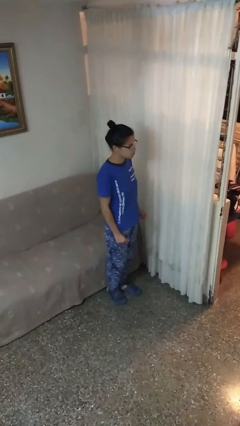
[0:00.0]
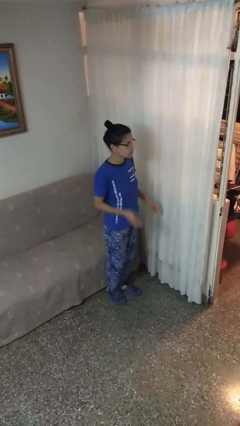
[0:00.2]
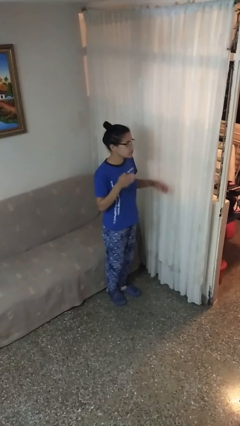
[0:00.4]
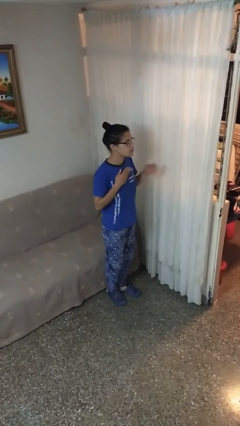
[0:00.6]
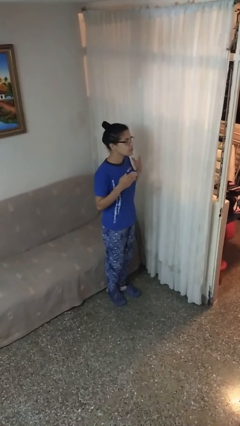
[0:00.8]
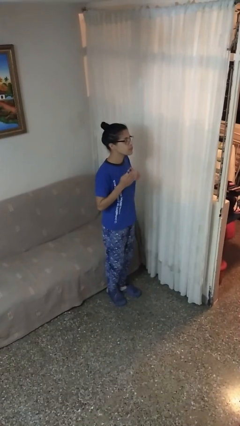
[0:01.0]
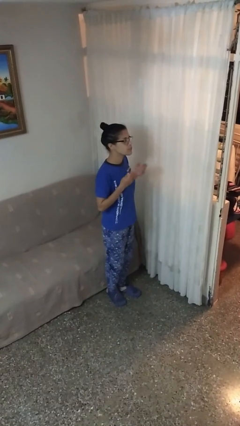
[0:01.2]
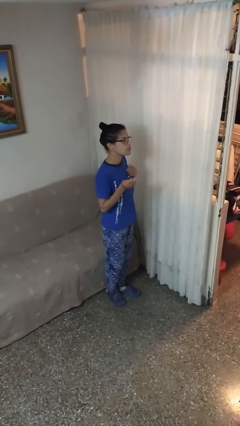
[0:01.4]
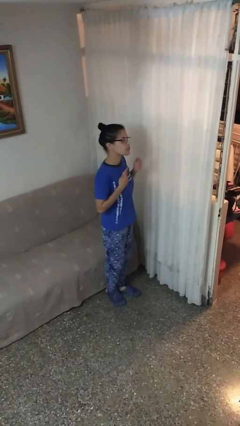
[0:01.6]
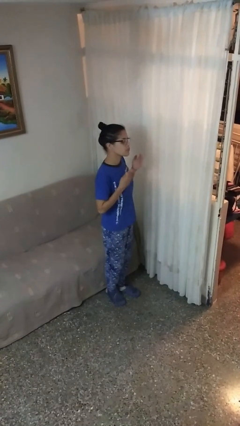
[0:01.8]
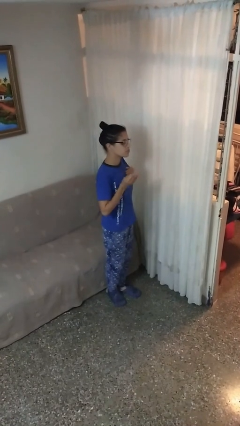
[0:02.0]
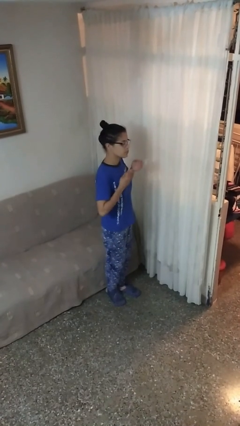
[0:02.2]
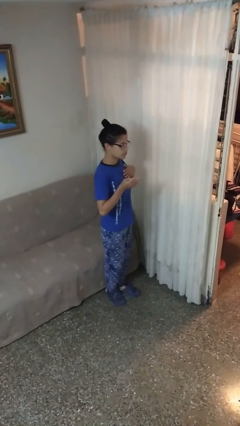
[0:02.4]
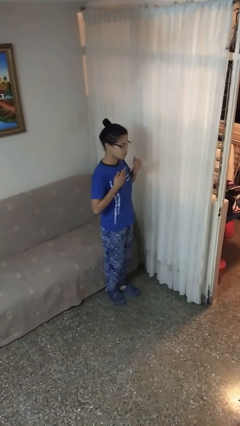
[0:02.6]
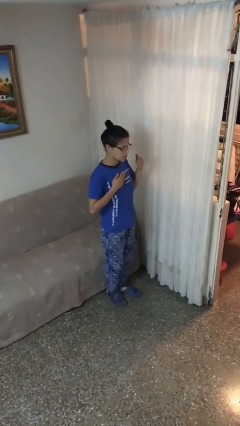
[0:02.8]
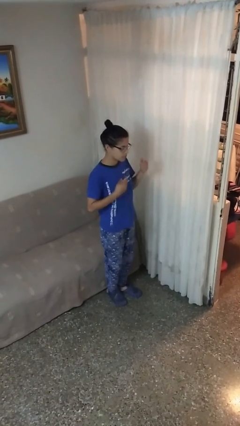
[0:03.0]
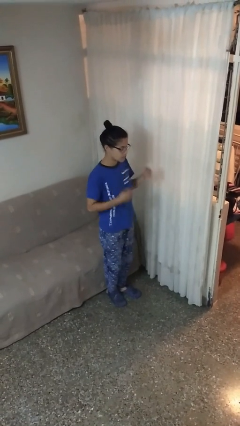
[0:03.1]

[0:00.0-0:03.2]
person drums on chest

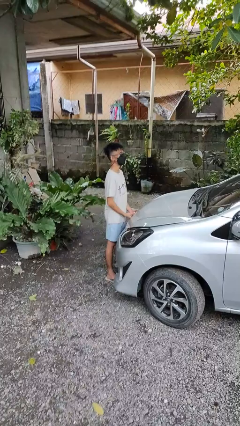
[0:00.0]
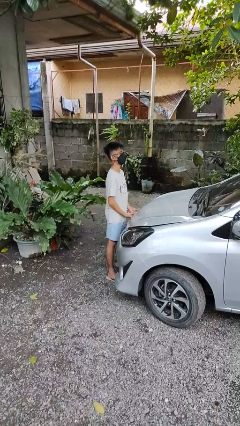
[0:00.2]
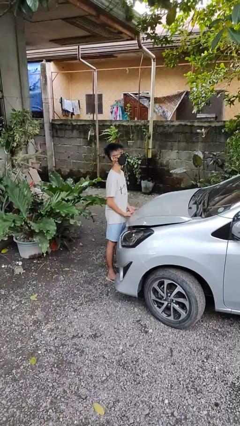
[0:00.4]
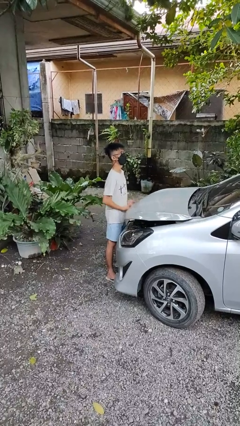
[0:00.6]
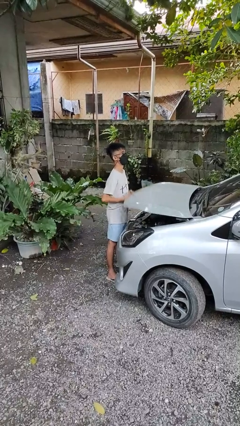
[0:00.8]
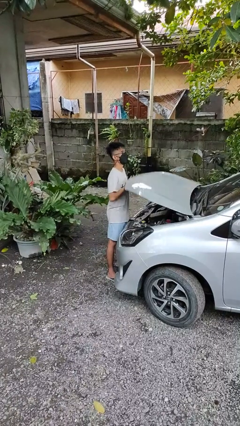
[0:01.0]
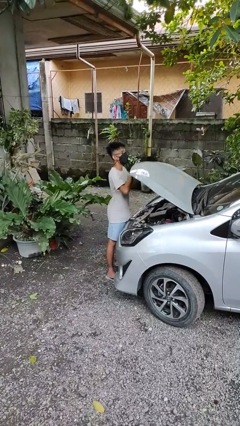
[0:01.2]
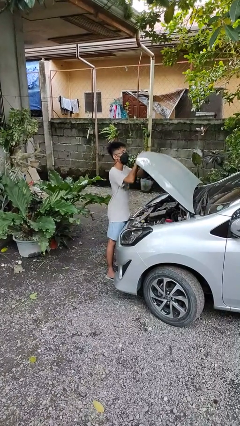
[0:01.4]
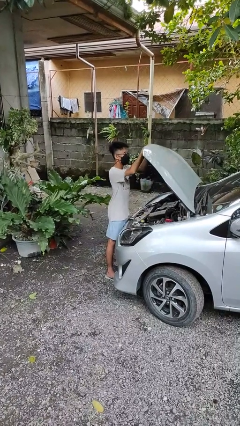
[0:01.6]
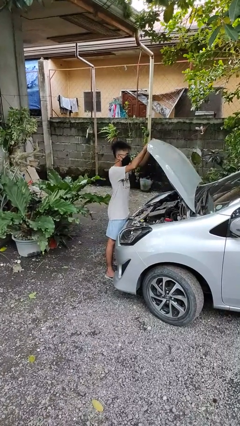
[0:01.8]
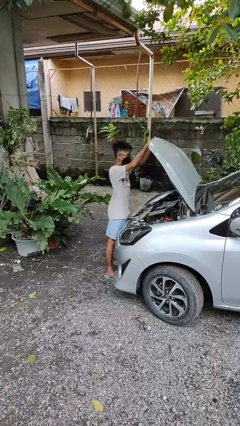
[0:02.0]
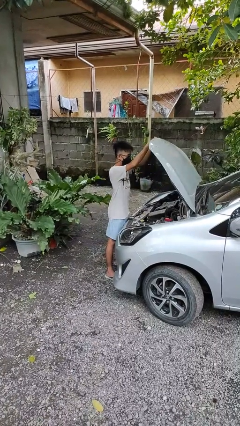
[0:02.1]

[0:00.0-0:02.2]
person opens car hood

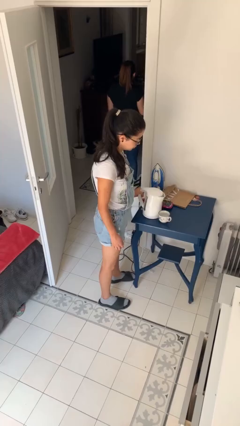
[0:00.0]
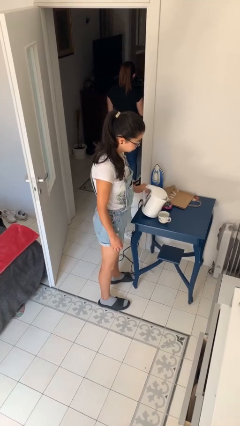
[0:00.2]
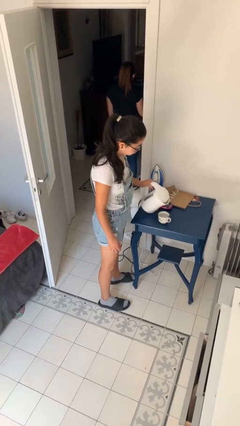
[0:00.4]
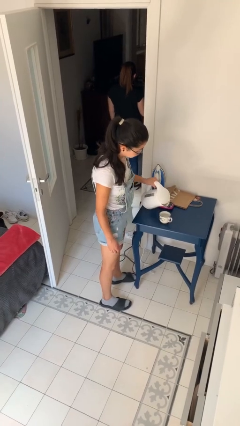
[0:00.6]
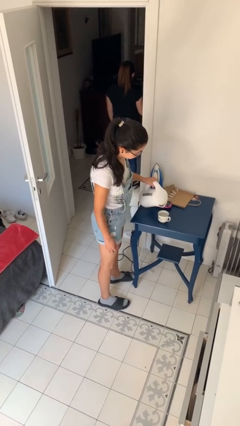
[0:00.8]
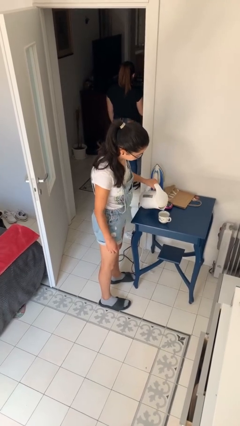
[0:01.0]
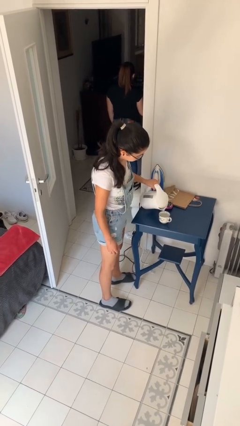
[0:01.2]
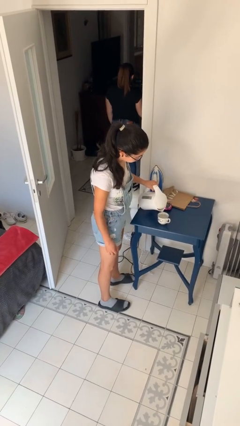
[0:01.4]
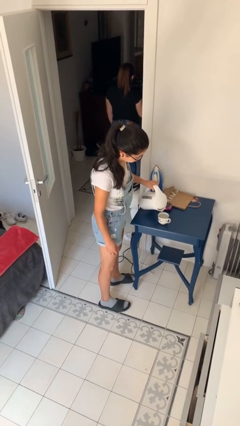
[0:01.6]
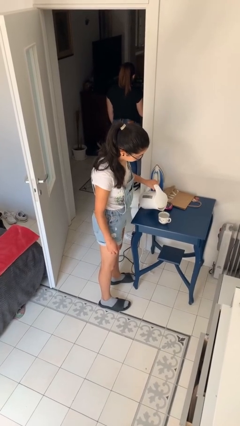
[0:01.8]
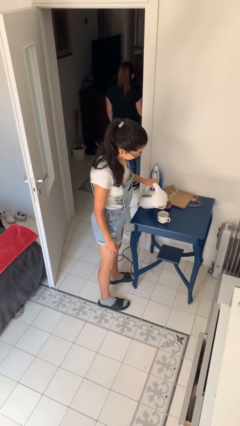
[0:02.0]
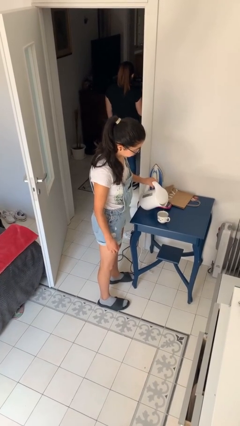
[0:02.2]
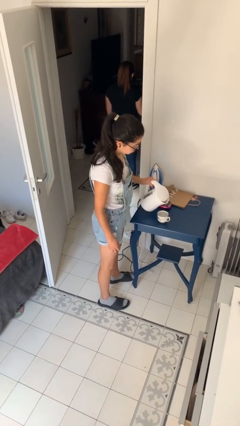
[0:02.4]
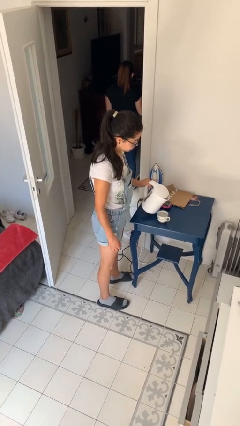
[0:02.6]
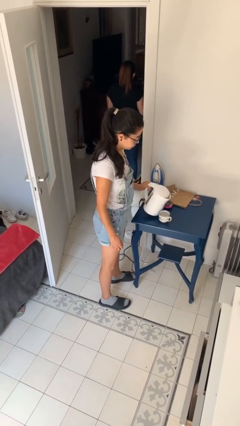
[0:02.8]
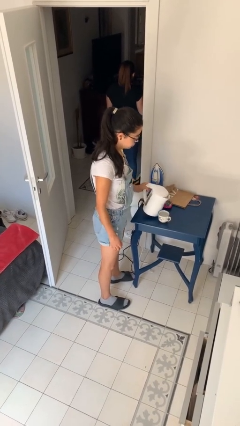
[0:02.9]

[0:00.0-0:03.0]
person pours coffee into mug

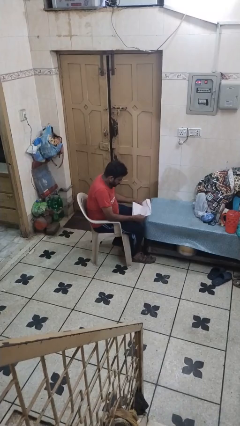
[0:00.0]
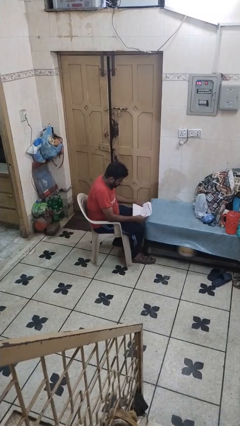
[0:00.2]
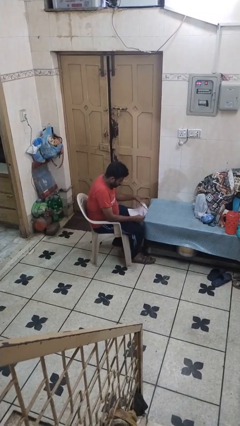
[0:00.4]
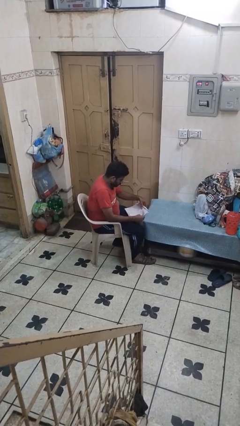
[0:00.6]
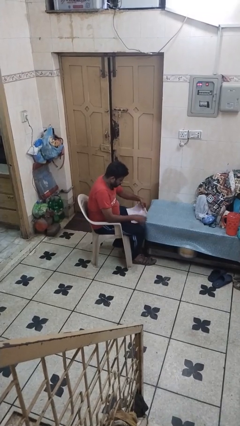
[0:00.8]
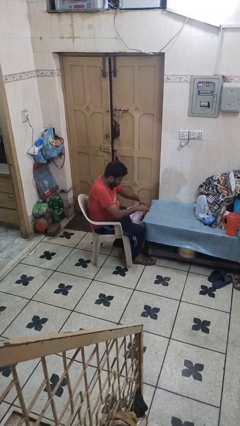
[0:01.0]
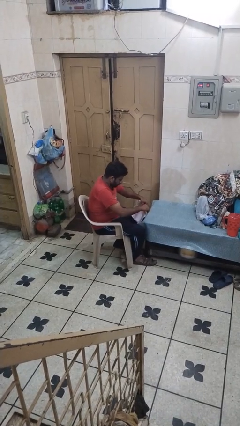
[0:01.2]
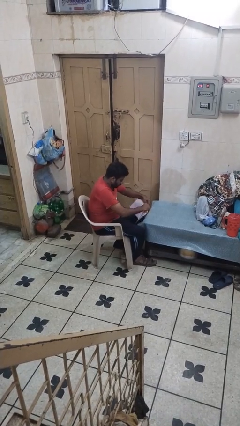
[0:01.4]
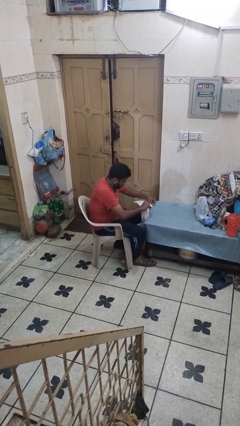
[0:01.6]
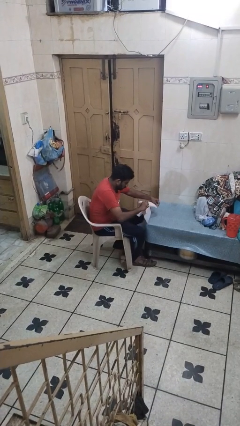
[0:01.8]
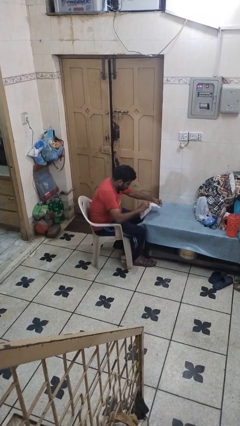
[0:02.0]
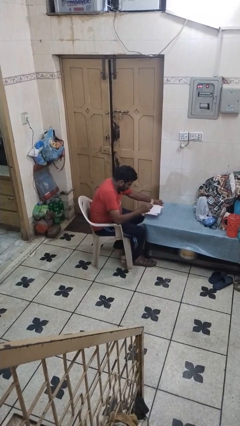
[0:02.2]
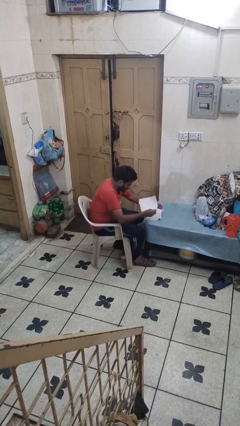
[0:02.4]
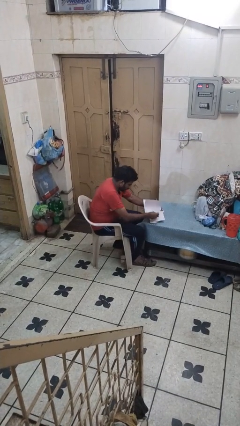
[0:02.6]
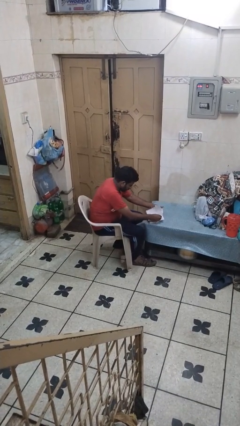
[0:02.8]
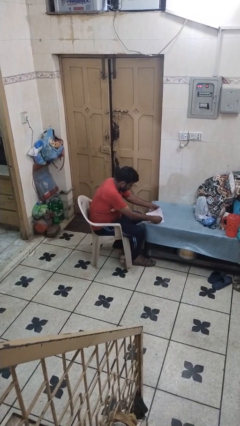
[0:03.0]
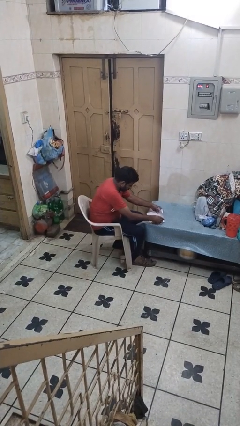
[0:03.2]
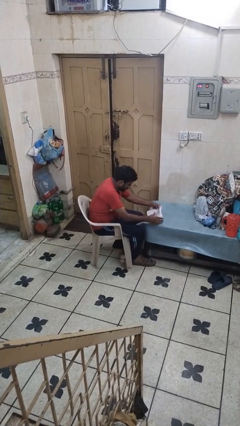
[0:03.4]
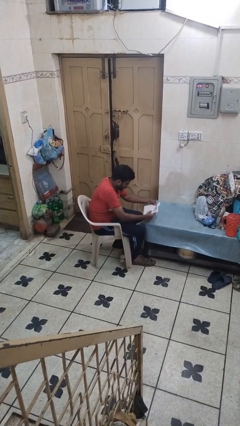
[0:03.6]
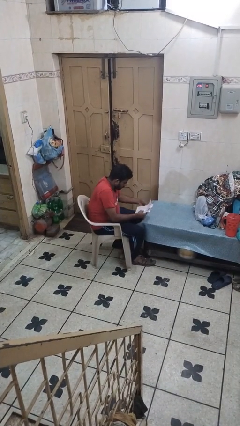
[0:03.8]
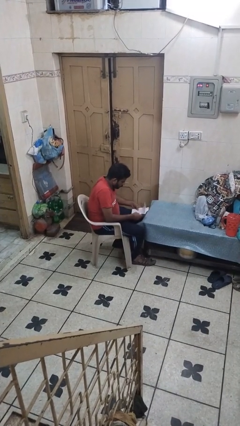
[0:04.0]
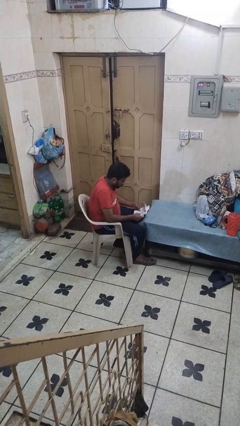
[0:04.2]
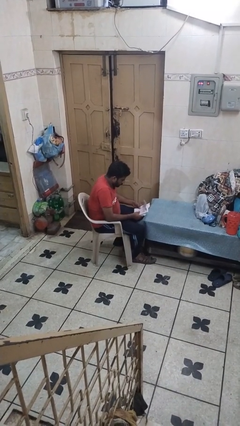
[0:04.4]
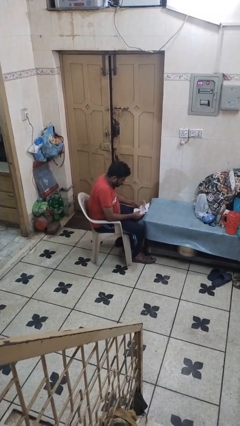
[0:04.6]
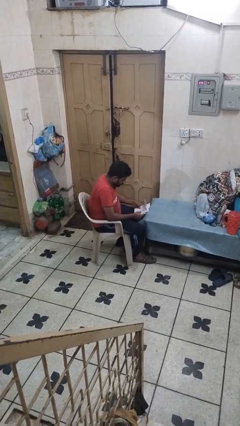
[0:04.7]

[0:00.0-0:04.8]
person tears paper

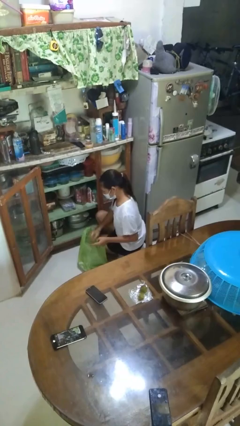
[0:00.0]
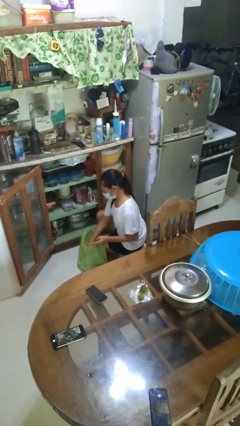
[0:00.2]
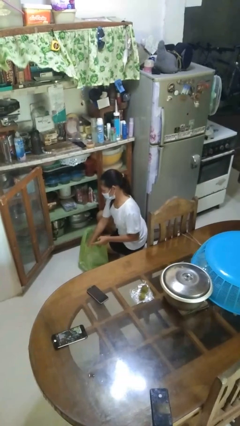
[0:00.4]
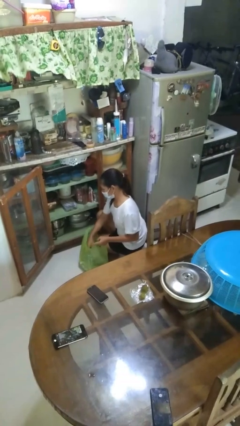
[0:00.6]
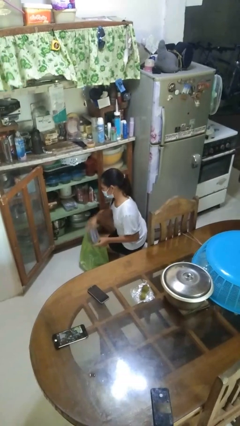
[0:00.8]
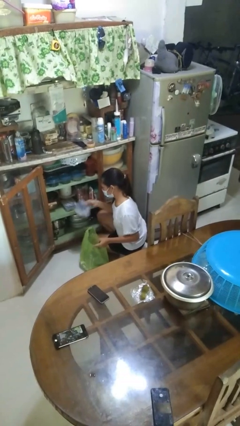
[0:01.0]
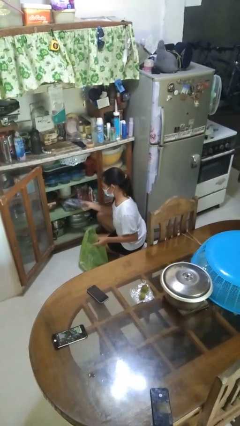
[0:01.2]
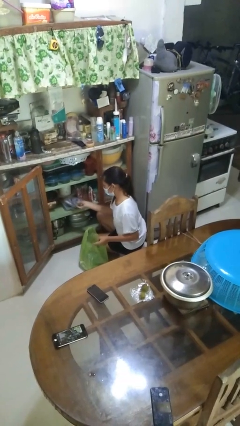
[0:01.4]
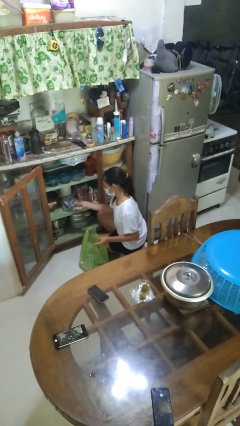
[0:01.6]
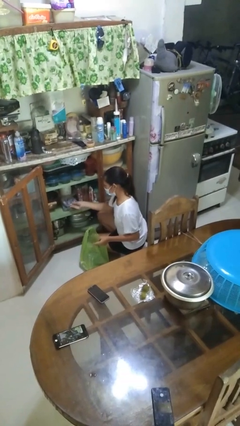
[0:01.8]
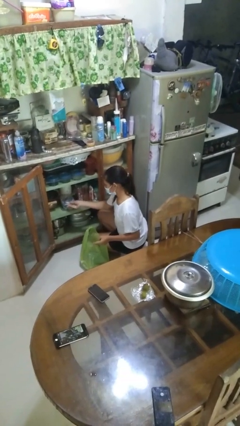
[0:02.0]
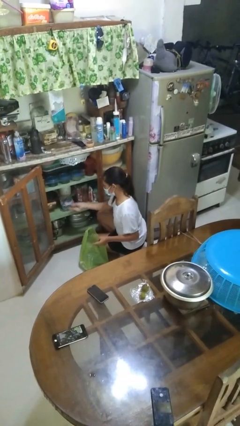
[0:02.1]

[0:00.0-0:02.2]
person loads groceries into cabinet

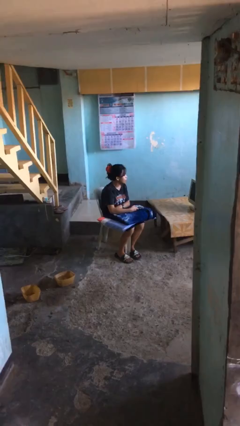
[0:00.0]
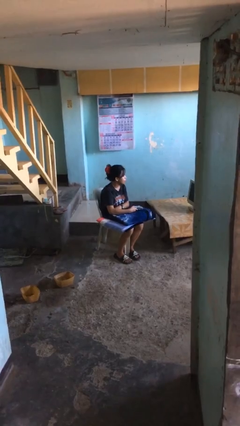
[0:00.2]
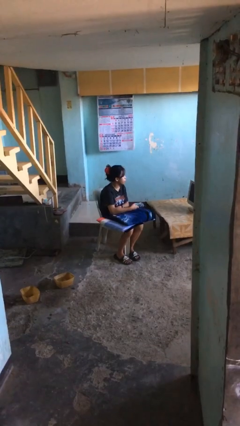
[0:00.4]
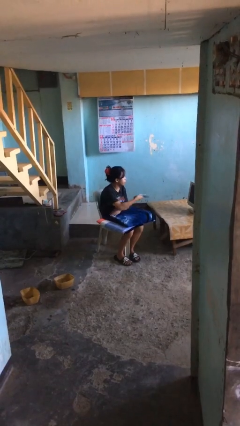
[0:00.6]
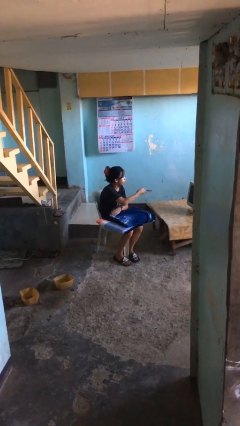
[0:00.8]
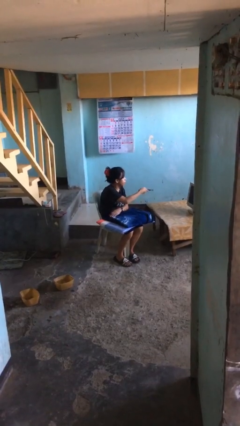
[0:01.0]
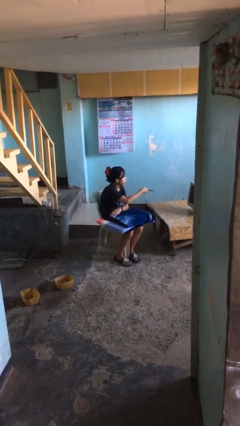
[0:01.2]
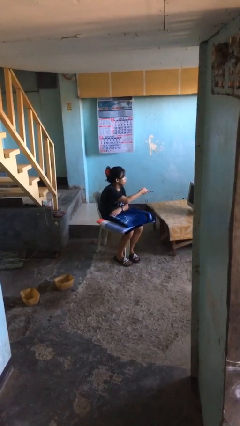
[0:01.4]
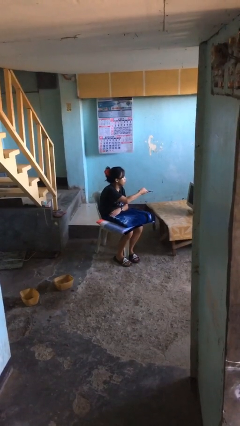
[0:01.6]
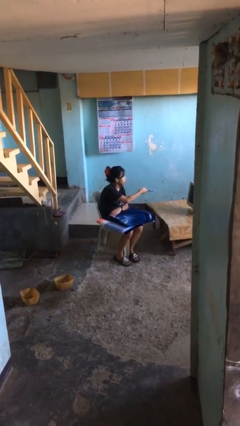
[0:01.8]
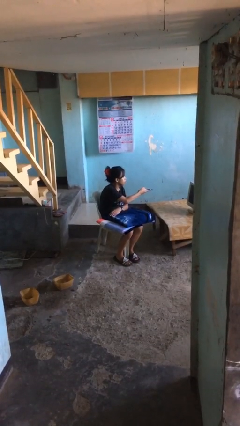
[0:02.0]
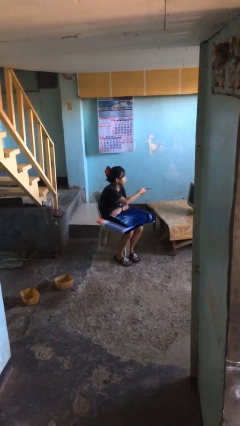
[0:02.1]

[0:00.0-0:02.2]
person uses television remote
